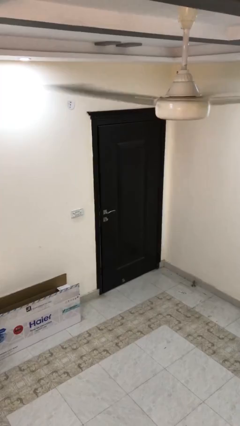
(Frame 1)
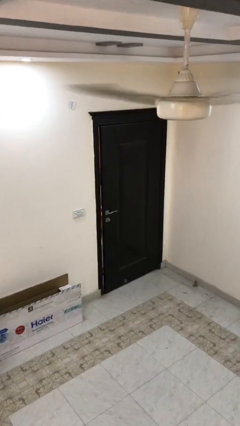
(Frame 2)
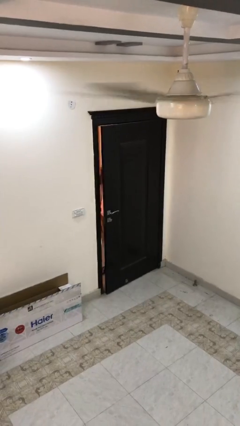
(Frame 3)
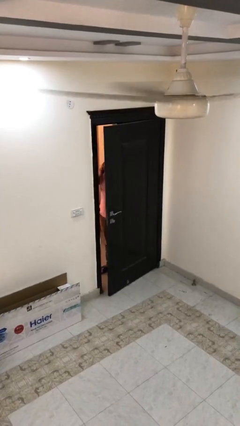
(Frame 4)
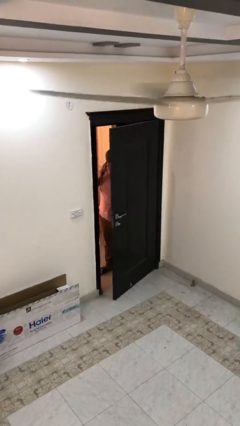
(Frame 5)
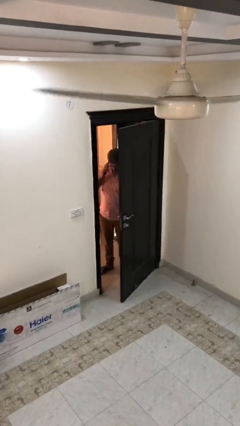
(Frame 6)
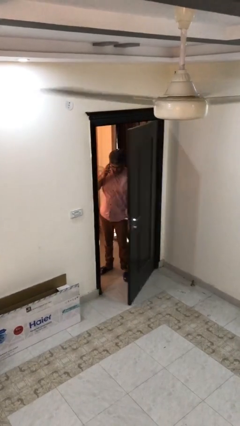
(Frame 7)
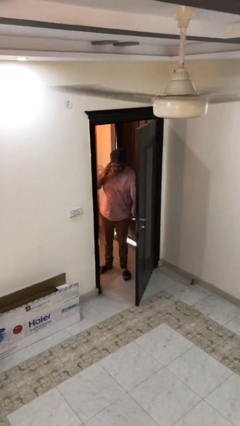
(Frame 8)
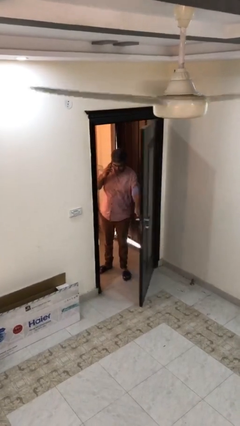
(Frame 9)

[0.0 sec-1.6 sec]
person opens facility door

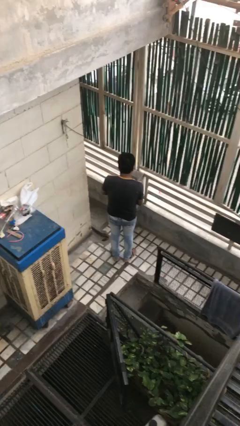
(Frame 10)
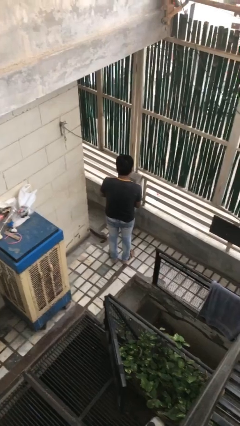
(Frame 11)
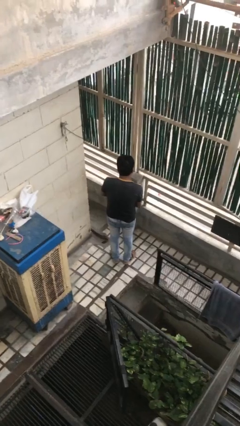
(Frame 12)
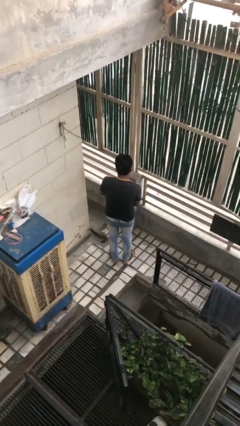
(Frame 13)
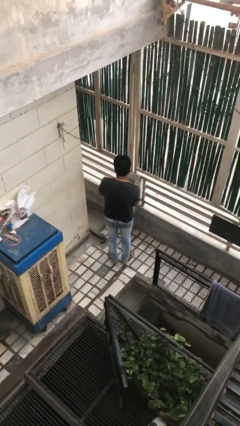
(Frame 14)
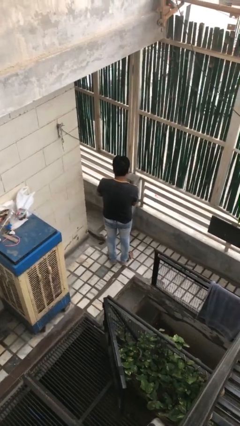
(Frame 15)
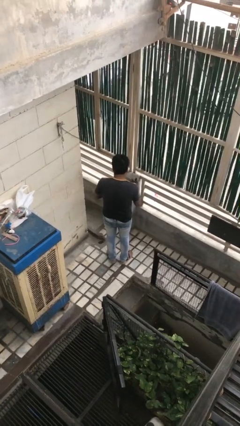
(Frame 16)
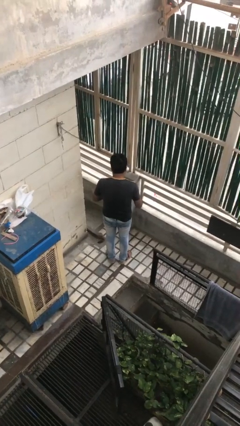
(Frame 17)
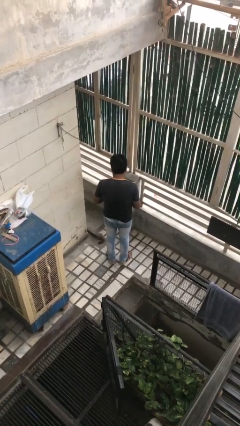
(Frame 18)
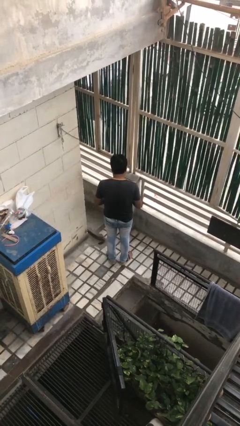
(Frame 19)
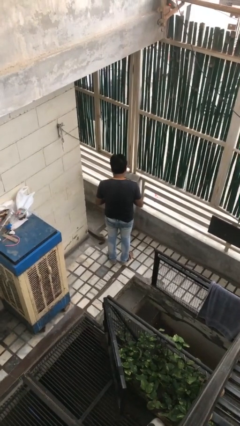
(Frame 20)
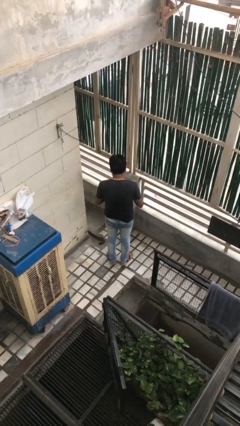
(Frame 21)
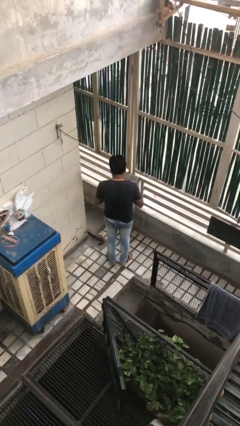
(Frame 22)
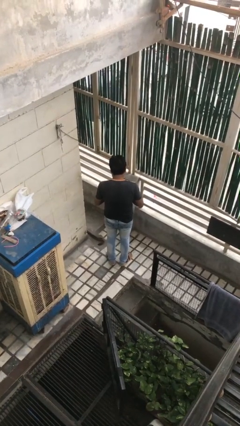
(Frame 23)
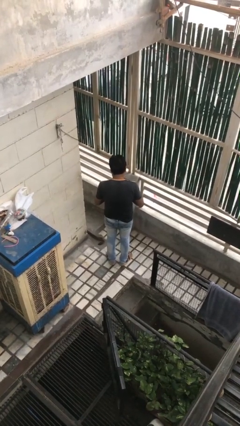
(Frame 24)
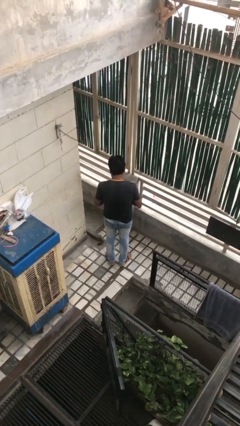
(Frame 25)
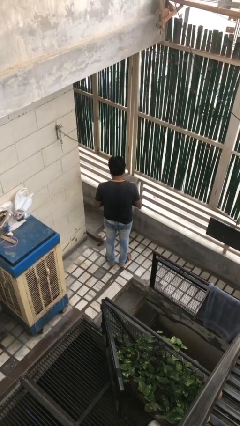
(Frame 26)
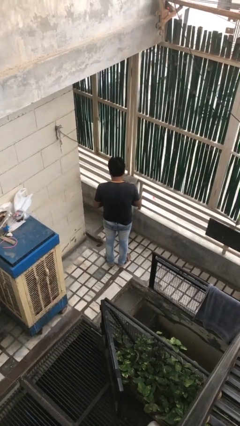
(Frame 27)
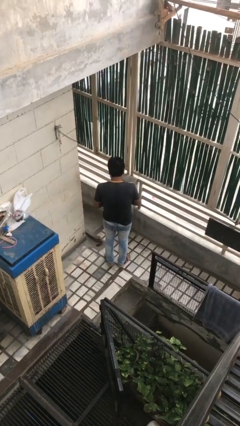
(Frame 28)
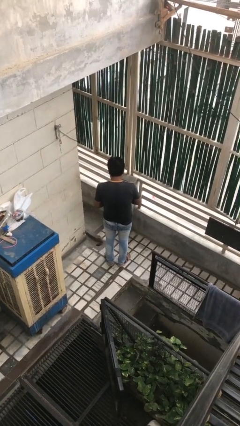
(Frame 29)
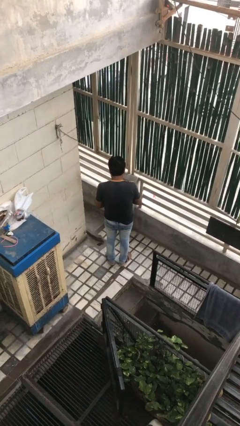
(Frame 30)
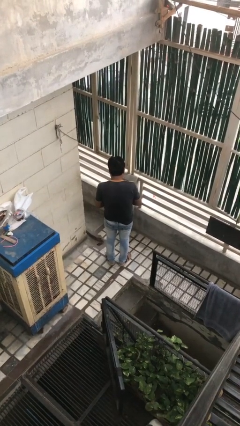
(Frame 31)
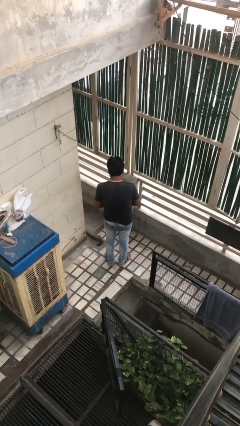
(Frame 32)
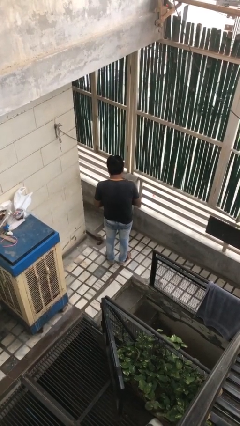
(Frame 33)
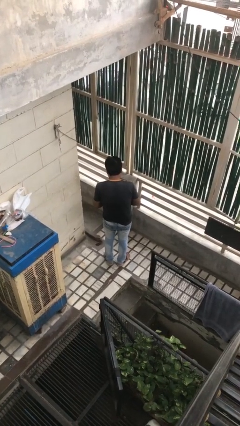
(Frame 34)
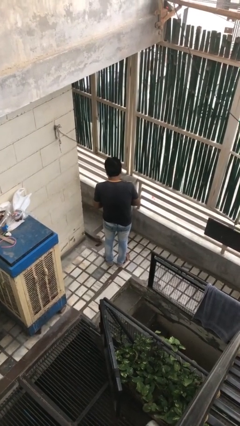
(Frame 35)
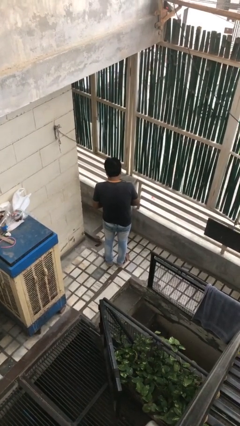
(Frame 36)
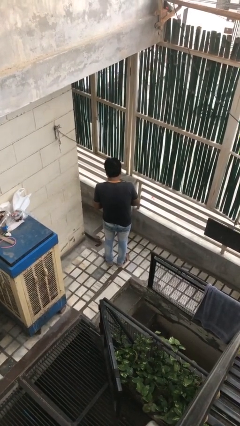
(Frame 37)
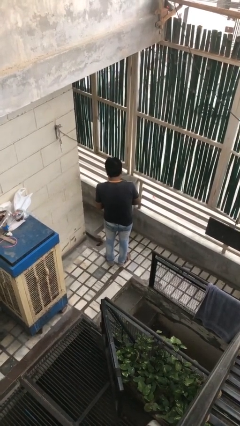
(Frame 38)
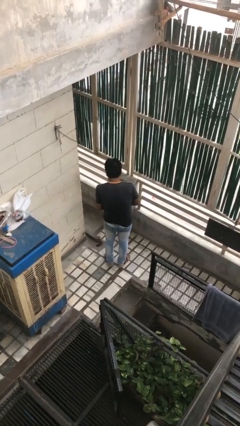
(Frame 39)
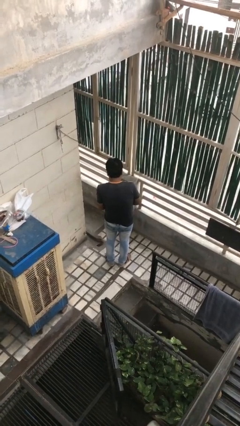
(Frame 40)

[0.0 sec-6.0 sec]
person puts on gloves

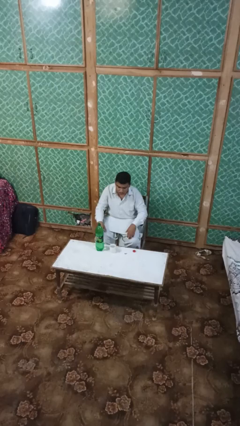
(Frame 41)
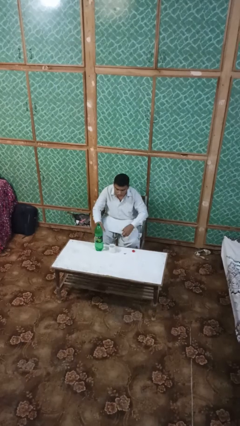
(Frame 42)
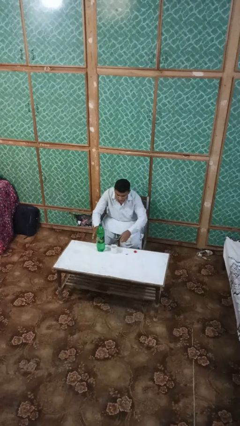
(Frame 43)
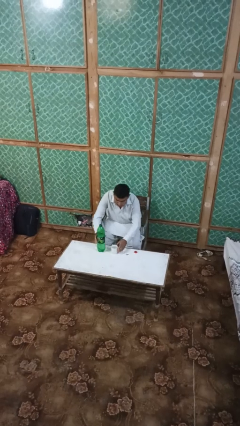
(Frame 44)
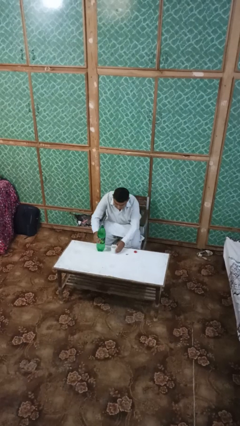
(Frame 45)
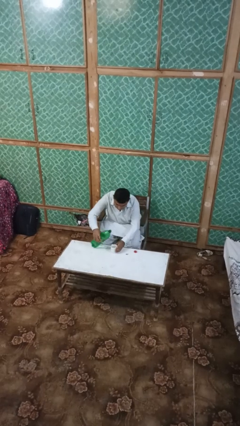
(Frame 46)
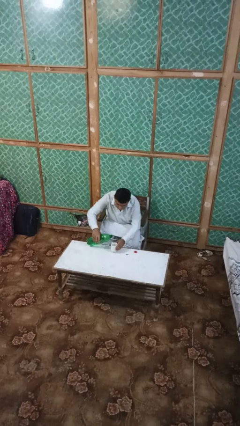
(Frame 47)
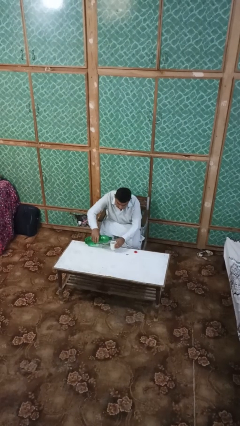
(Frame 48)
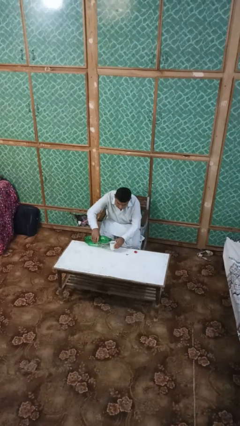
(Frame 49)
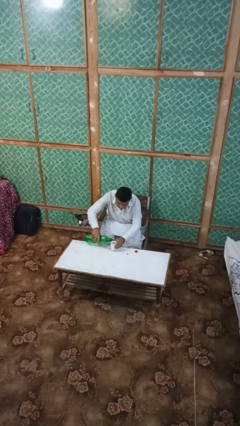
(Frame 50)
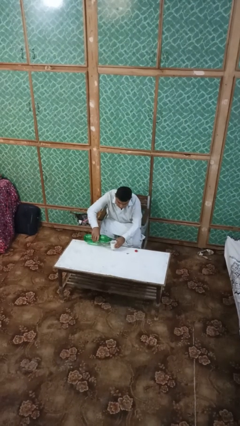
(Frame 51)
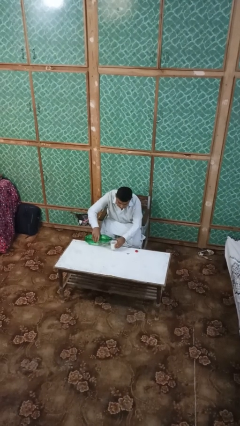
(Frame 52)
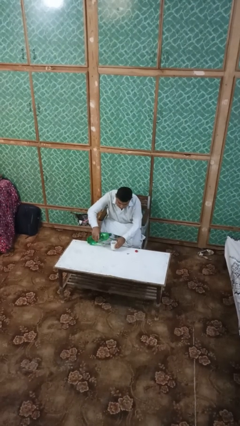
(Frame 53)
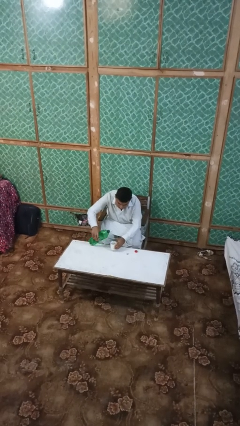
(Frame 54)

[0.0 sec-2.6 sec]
person pours liquid into cup

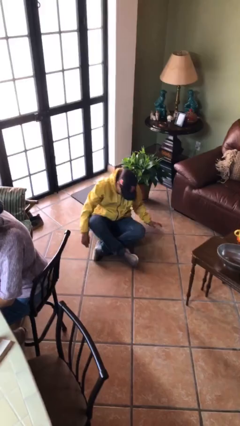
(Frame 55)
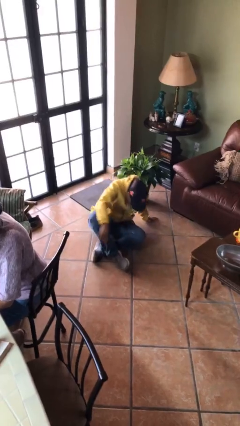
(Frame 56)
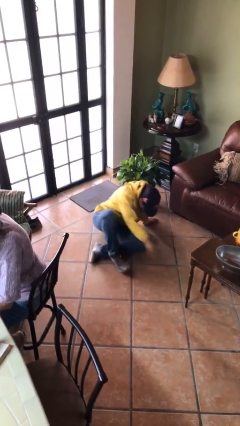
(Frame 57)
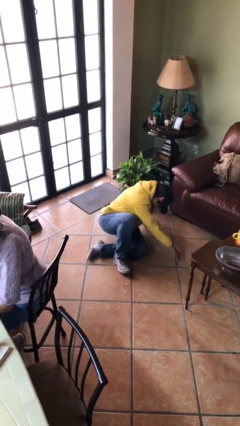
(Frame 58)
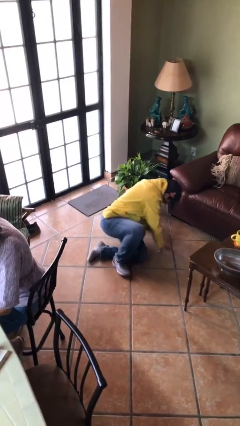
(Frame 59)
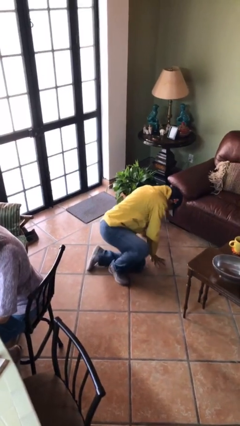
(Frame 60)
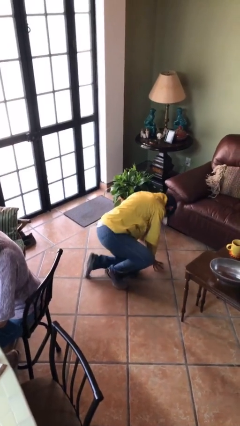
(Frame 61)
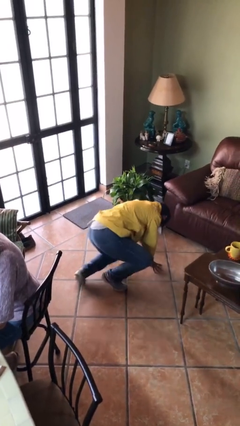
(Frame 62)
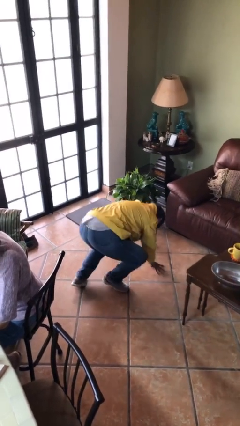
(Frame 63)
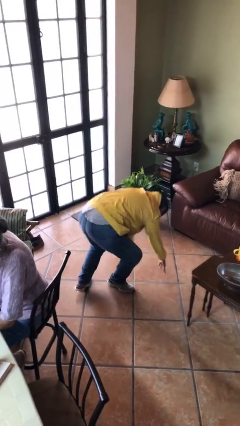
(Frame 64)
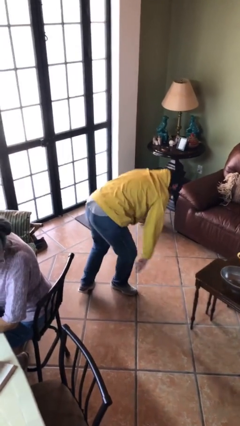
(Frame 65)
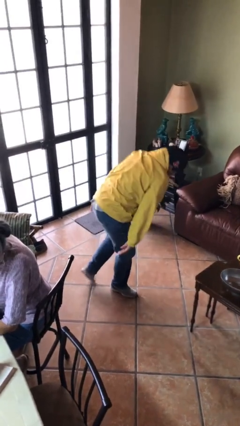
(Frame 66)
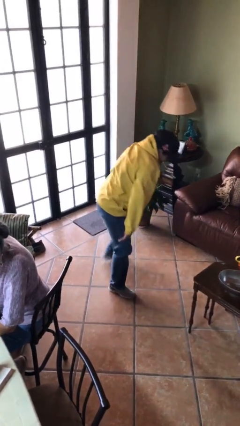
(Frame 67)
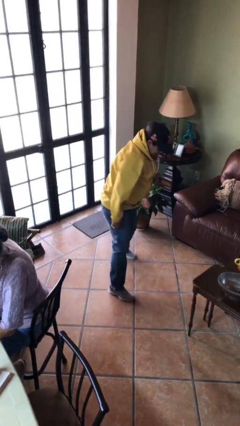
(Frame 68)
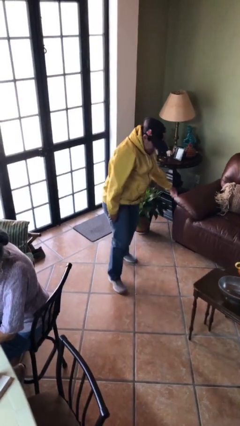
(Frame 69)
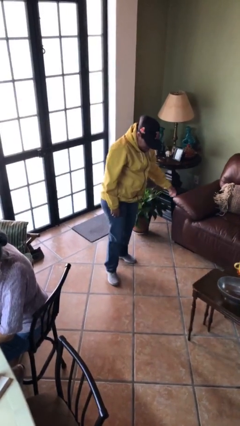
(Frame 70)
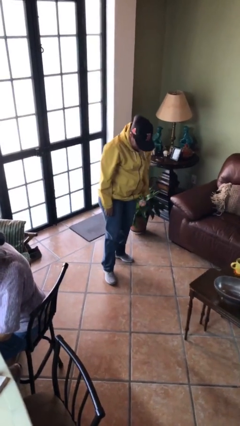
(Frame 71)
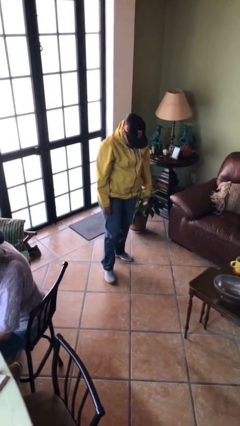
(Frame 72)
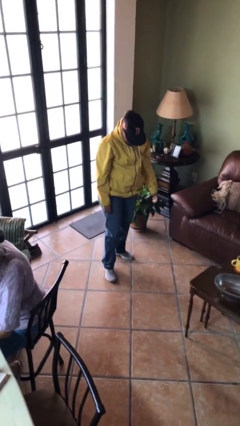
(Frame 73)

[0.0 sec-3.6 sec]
person stands up from floor

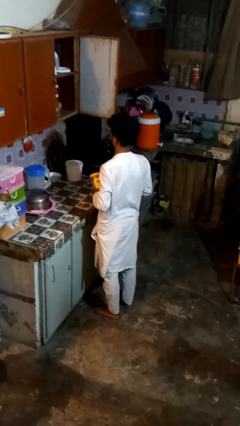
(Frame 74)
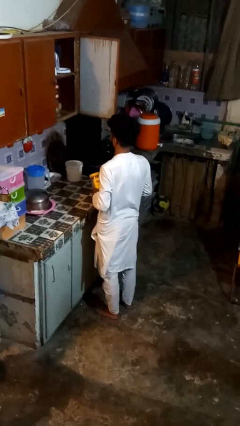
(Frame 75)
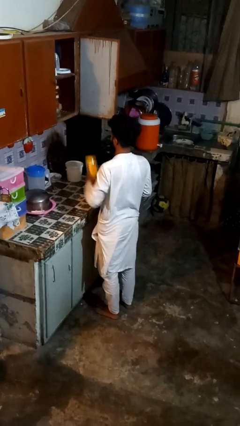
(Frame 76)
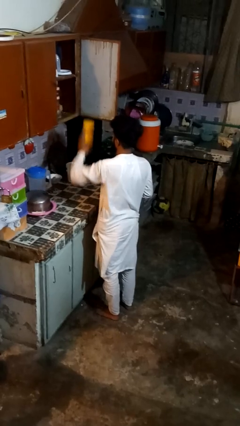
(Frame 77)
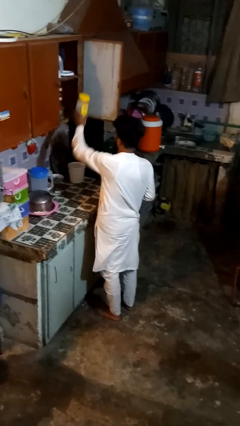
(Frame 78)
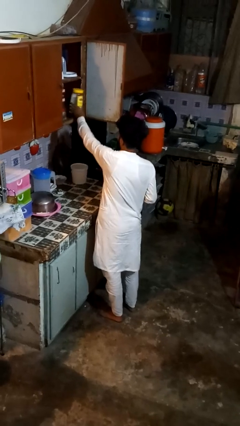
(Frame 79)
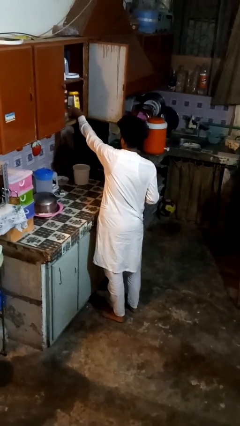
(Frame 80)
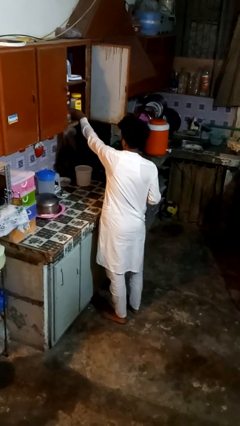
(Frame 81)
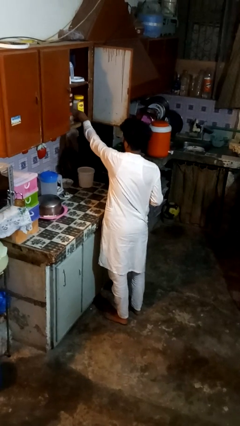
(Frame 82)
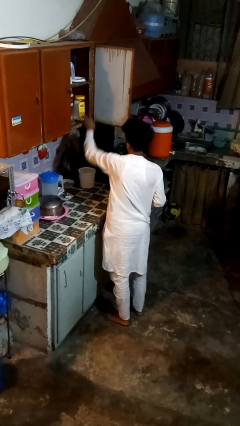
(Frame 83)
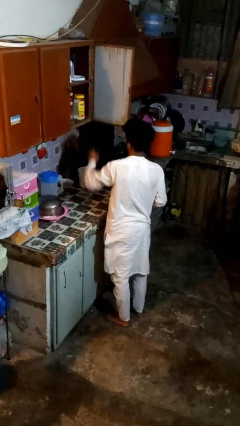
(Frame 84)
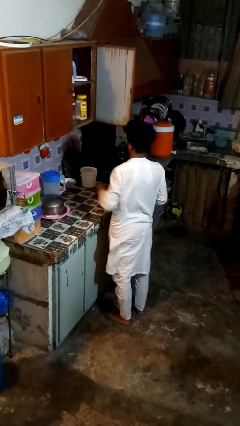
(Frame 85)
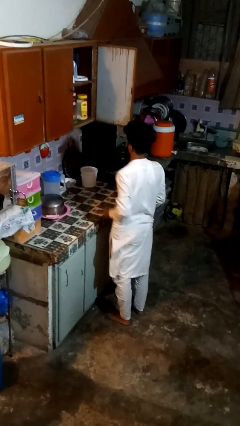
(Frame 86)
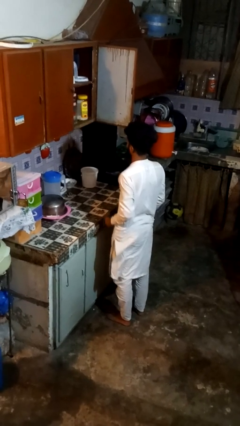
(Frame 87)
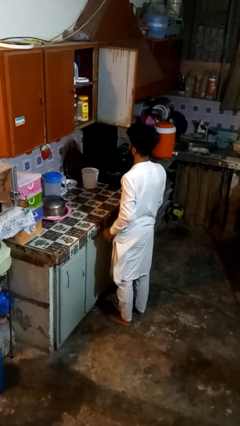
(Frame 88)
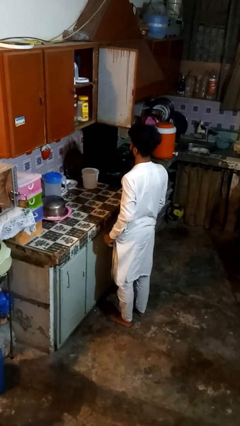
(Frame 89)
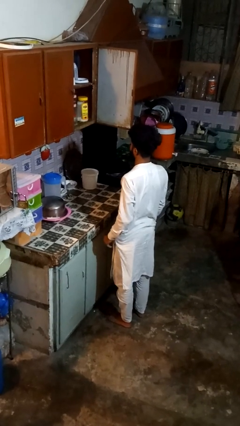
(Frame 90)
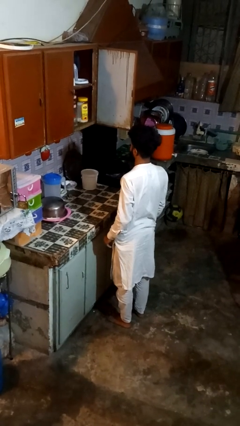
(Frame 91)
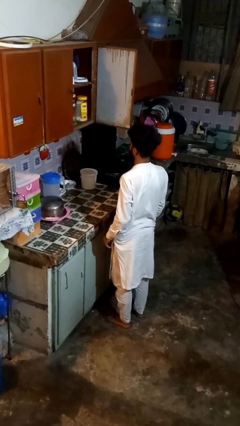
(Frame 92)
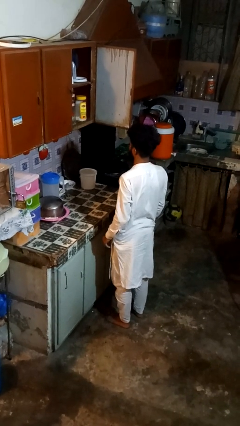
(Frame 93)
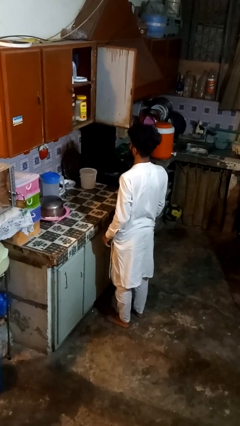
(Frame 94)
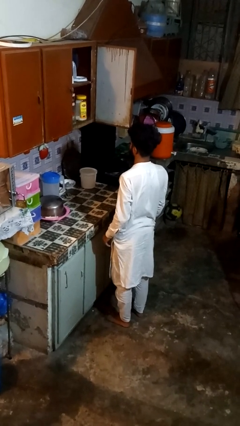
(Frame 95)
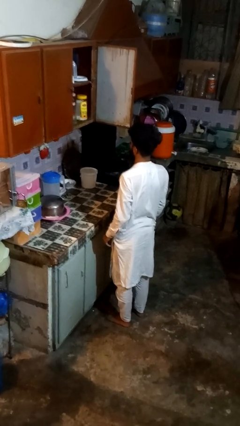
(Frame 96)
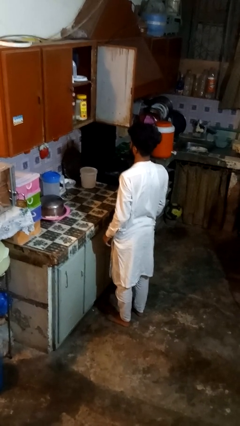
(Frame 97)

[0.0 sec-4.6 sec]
person takes object from cabinet
